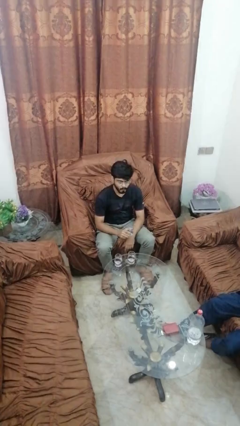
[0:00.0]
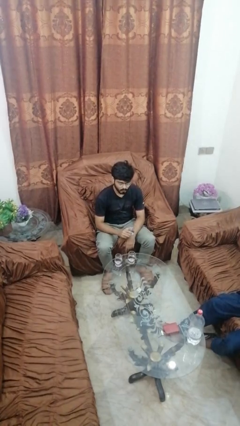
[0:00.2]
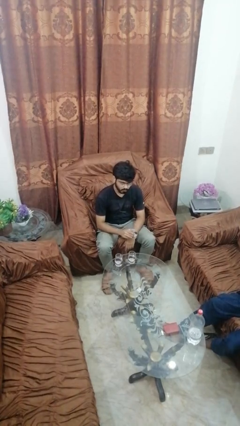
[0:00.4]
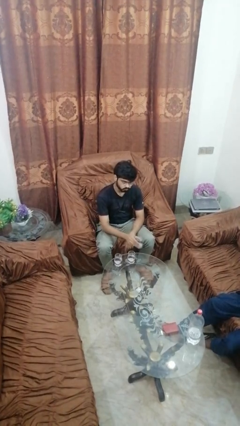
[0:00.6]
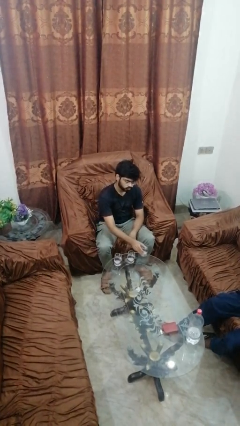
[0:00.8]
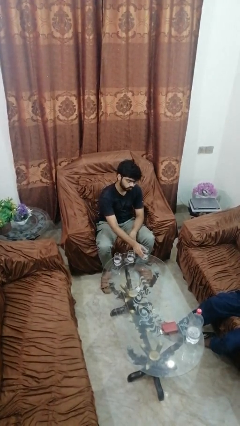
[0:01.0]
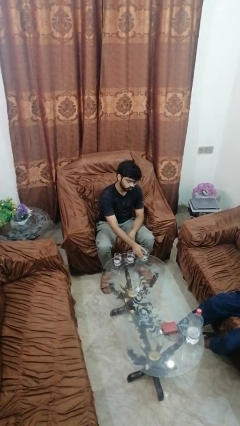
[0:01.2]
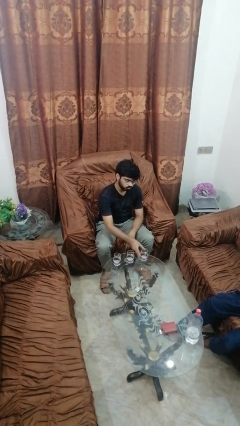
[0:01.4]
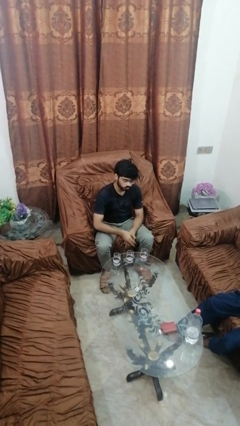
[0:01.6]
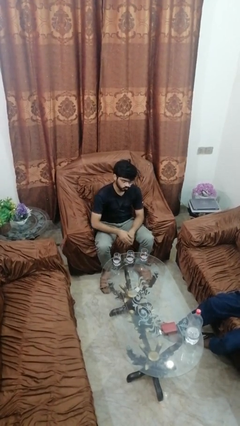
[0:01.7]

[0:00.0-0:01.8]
person puts down object on table

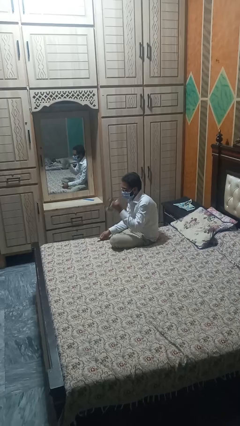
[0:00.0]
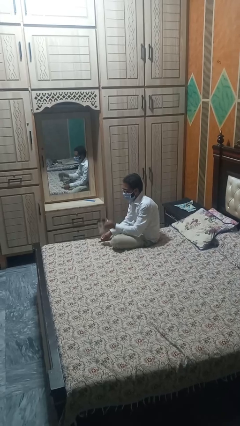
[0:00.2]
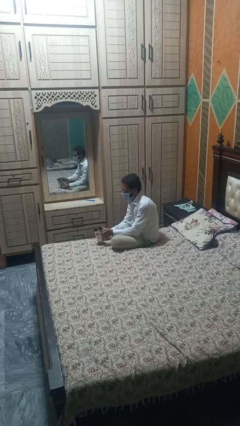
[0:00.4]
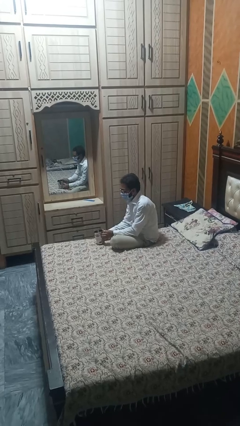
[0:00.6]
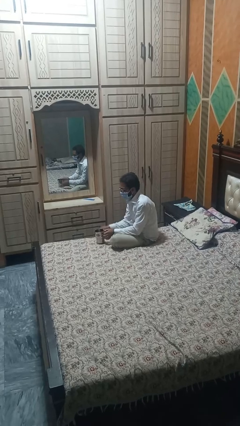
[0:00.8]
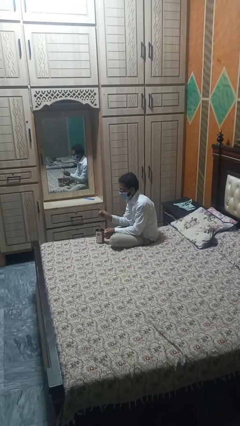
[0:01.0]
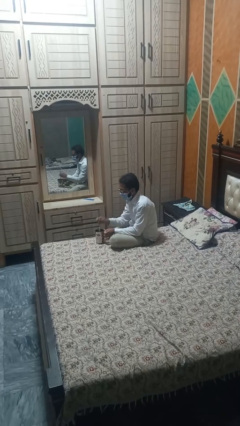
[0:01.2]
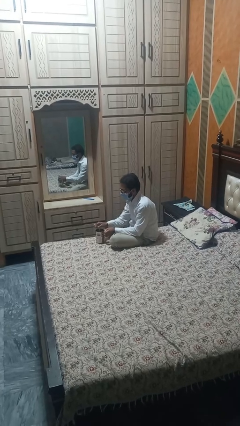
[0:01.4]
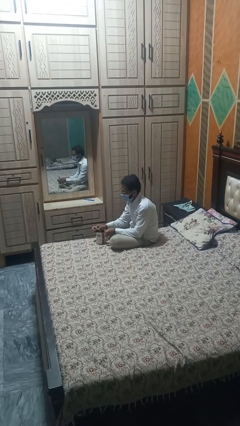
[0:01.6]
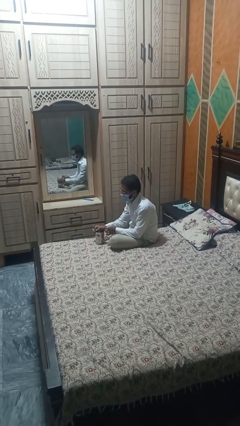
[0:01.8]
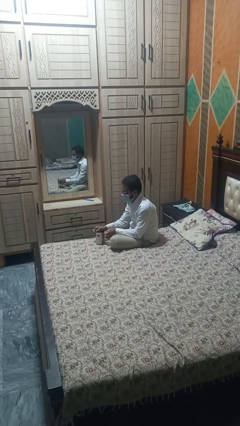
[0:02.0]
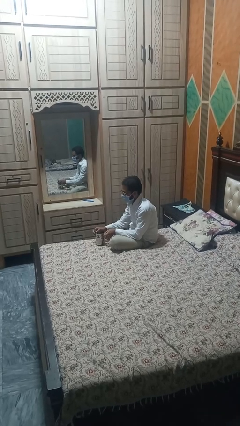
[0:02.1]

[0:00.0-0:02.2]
person stirs mug

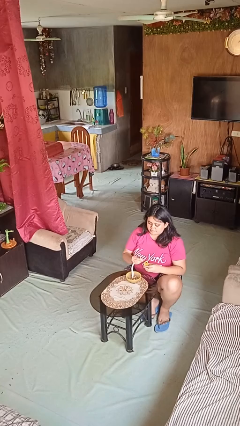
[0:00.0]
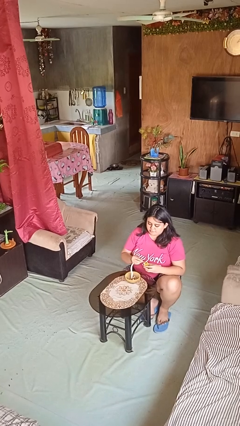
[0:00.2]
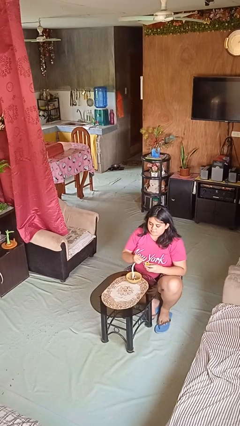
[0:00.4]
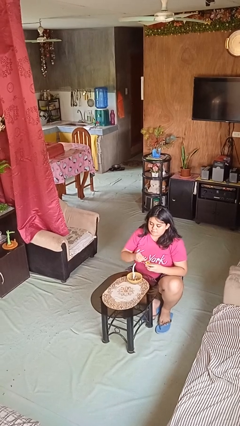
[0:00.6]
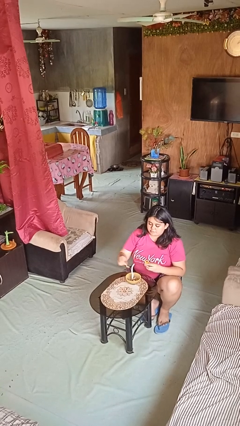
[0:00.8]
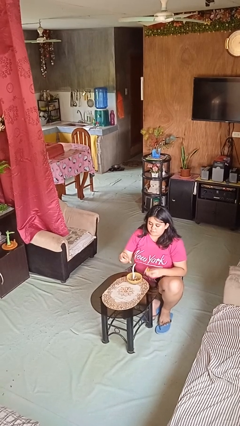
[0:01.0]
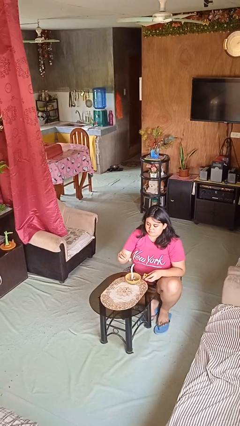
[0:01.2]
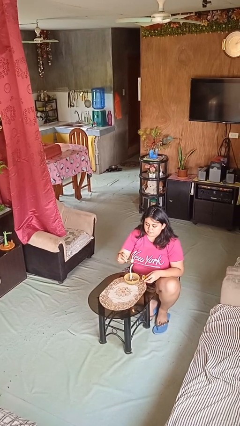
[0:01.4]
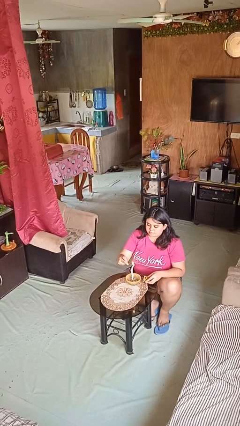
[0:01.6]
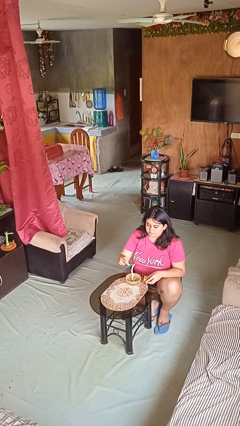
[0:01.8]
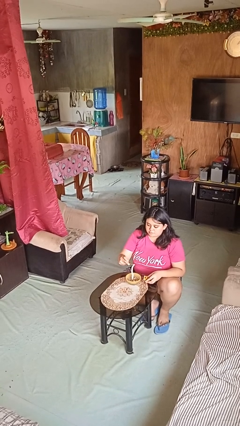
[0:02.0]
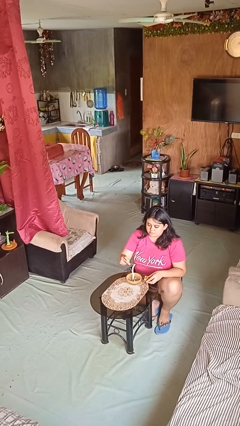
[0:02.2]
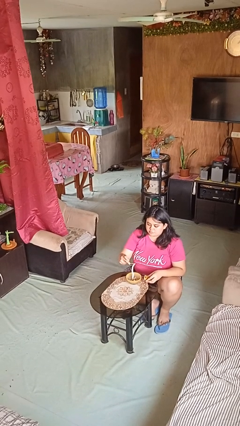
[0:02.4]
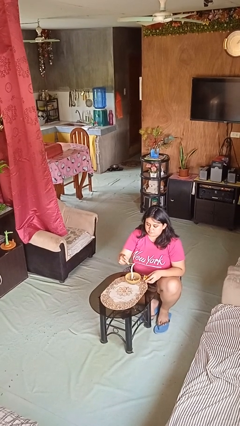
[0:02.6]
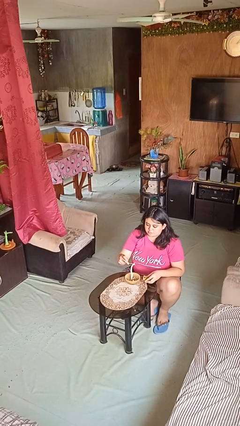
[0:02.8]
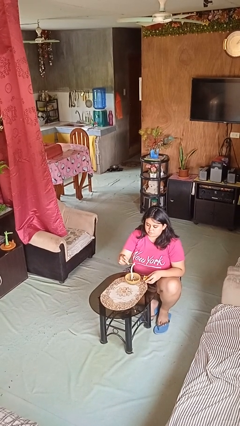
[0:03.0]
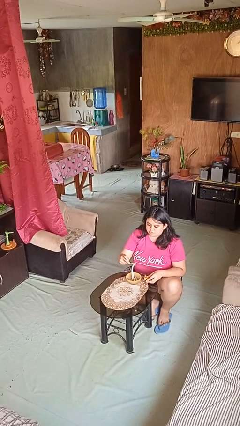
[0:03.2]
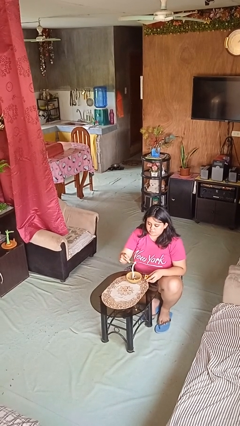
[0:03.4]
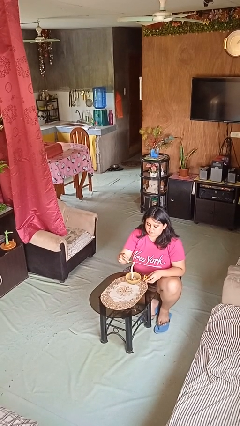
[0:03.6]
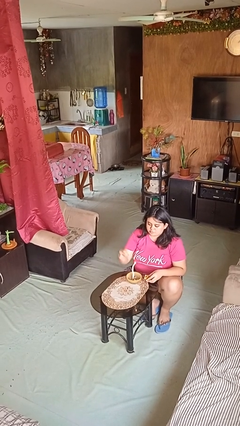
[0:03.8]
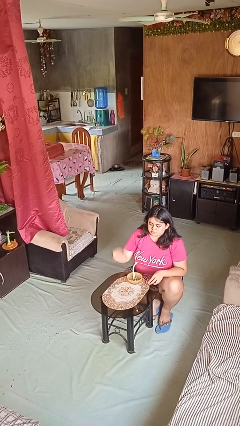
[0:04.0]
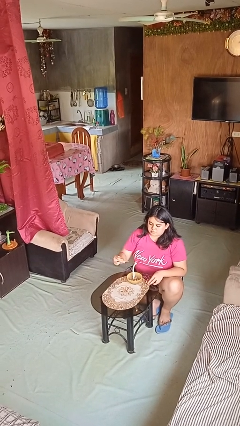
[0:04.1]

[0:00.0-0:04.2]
person lights candle

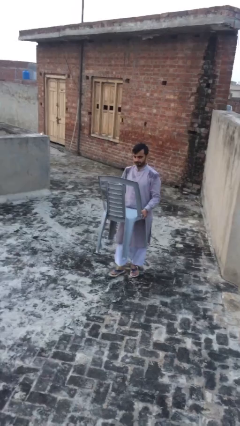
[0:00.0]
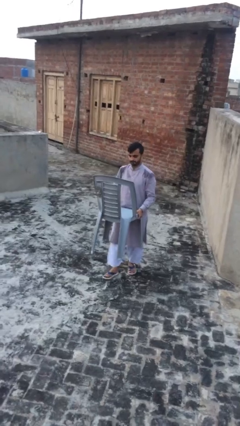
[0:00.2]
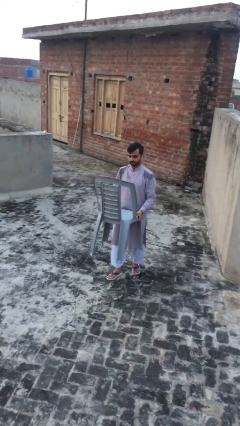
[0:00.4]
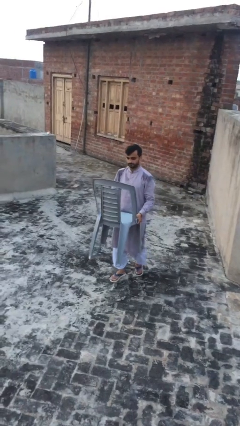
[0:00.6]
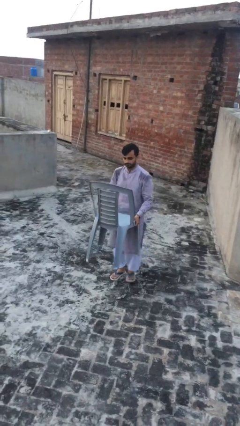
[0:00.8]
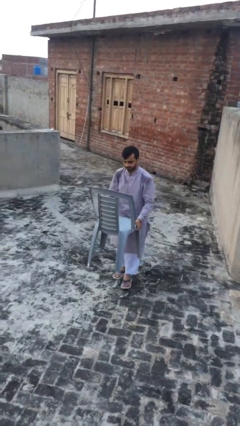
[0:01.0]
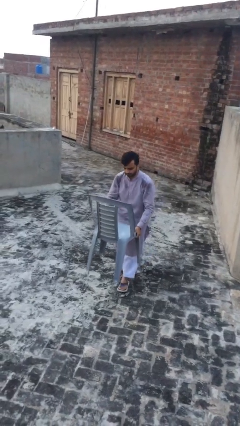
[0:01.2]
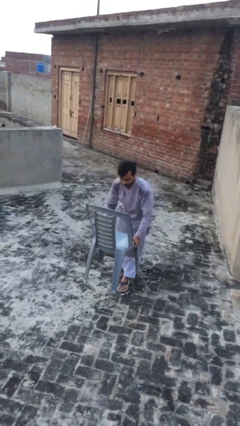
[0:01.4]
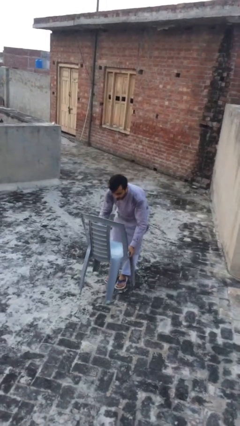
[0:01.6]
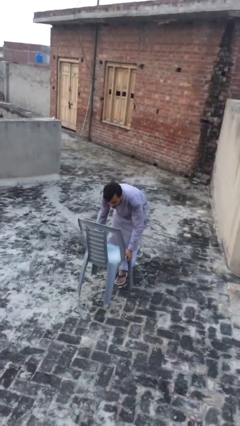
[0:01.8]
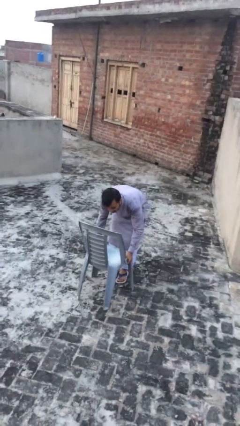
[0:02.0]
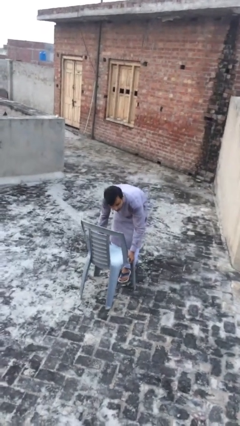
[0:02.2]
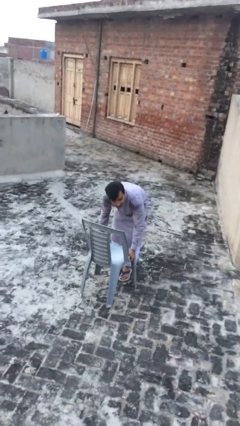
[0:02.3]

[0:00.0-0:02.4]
person puts down object on floor

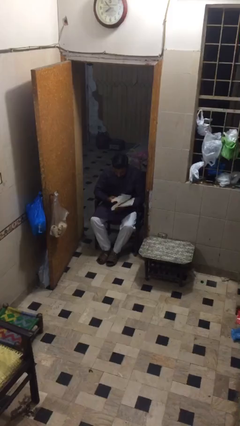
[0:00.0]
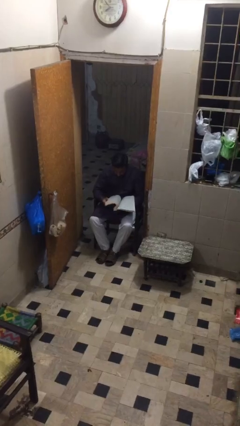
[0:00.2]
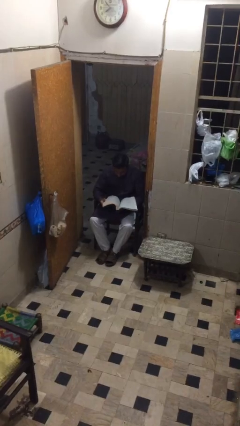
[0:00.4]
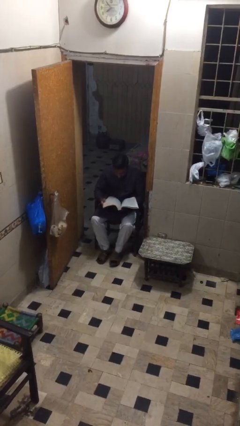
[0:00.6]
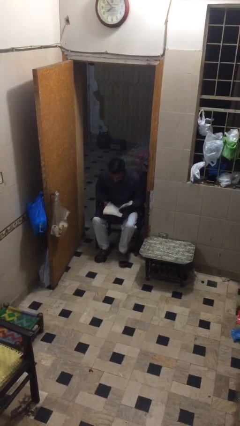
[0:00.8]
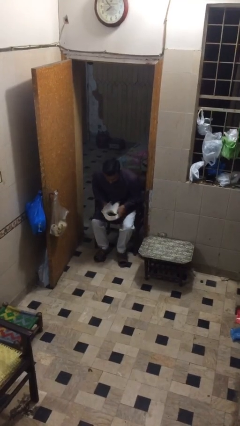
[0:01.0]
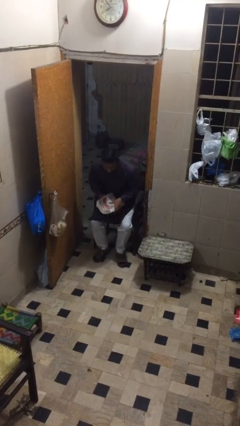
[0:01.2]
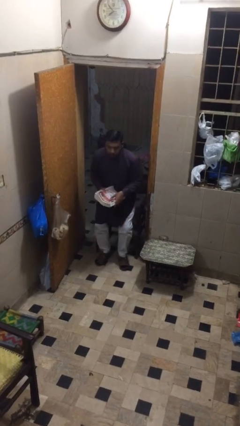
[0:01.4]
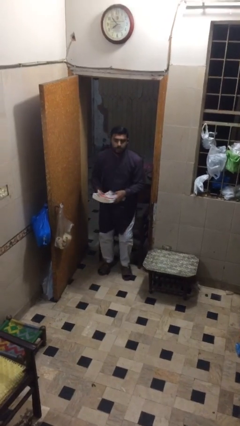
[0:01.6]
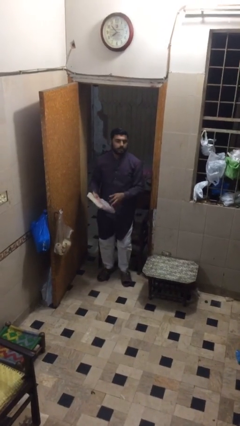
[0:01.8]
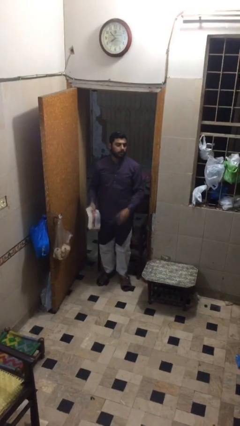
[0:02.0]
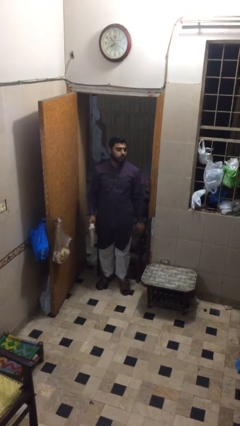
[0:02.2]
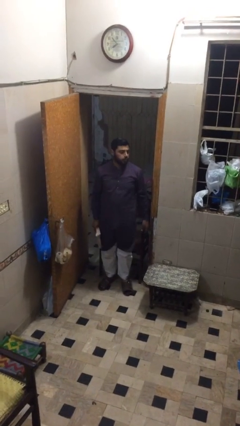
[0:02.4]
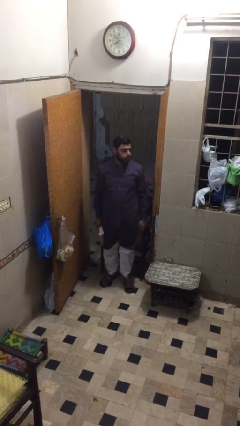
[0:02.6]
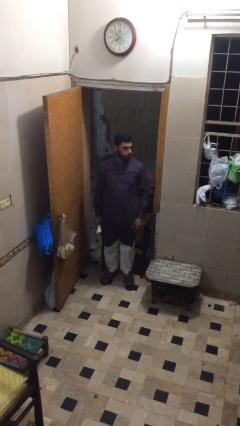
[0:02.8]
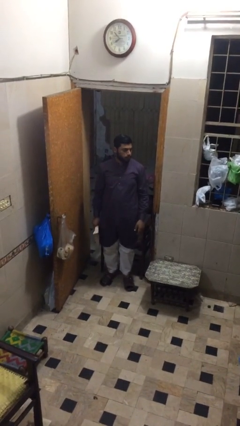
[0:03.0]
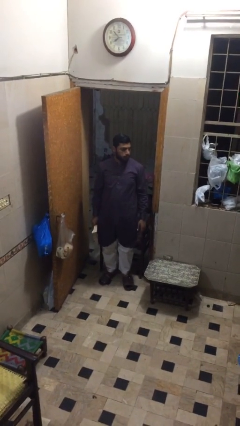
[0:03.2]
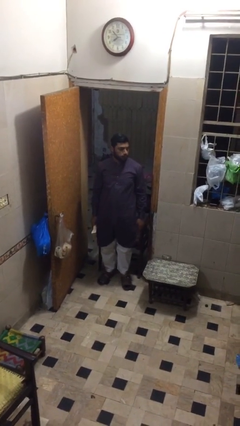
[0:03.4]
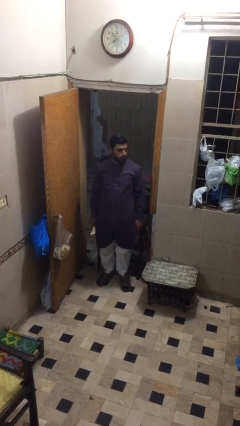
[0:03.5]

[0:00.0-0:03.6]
person stands up

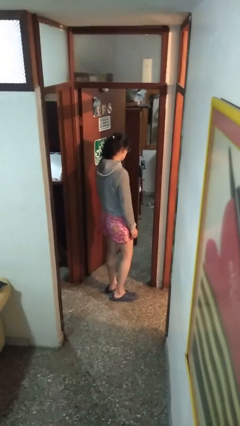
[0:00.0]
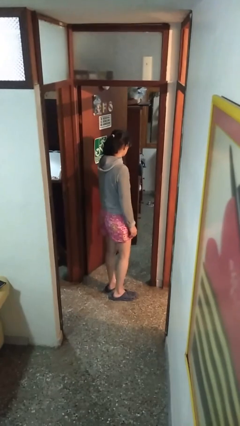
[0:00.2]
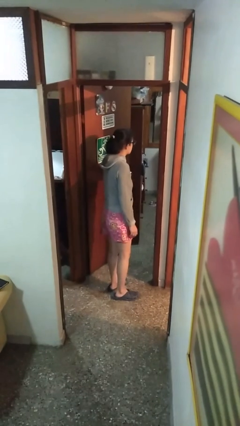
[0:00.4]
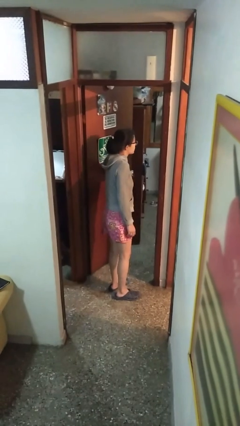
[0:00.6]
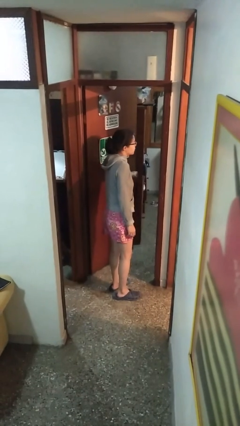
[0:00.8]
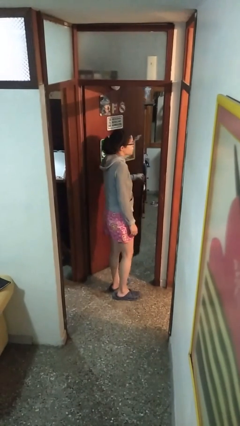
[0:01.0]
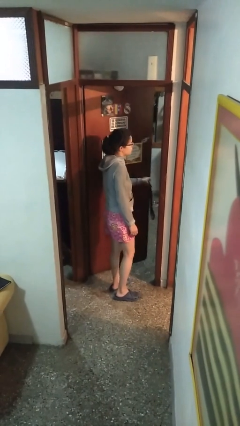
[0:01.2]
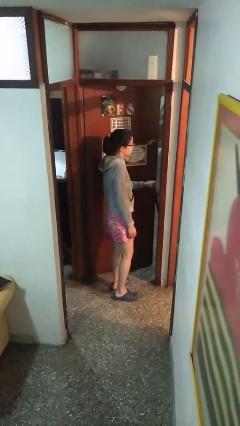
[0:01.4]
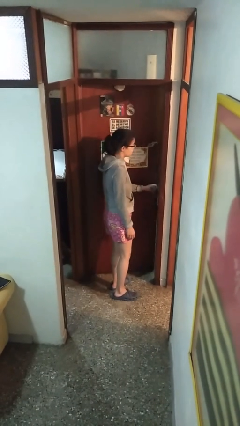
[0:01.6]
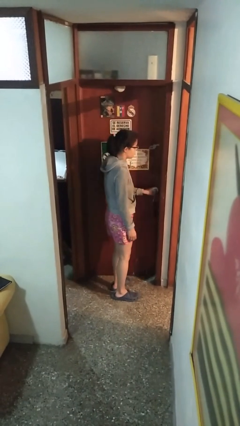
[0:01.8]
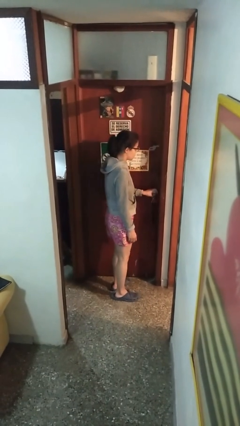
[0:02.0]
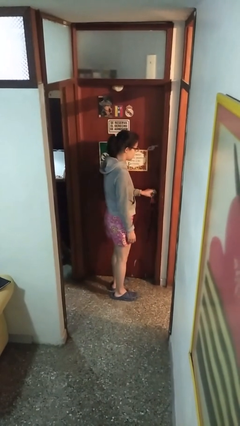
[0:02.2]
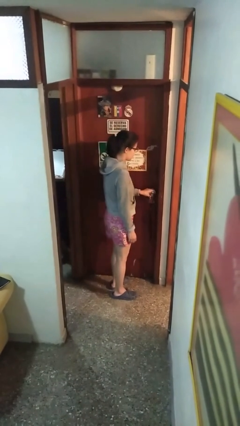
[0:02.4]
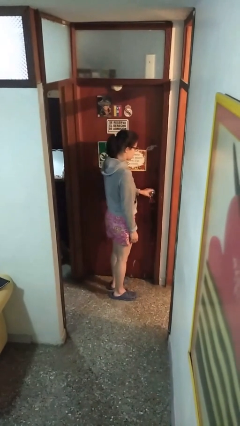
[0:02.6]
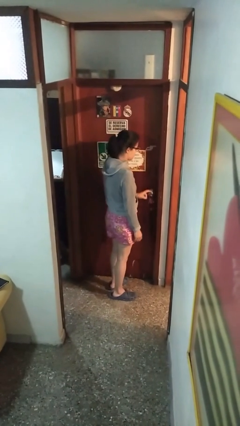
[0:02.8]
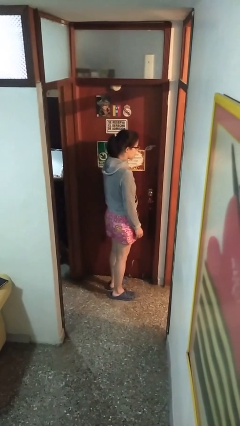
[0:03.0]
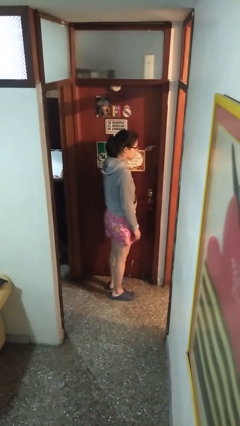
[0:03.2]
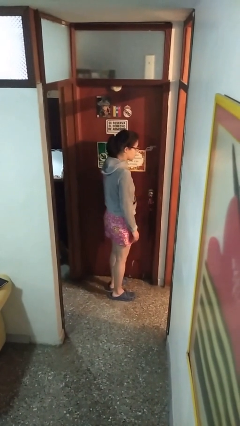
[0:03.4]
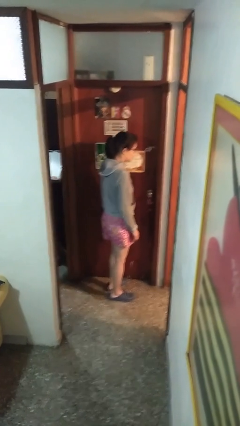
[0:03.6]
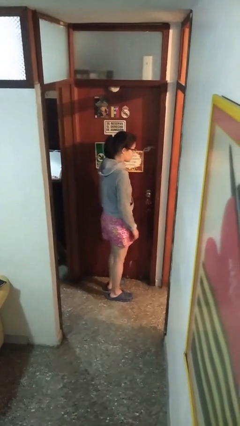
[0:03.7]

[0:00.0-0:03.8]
person closes facility door
